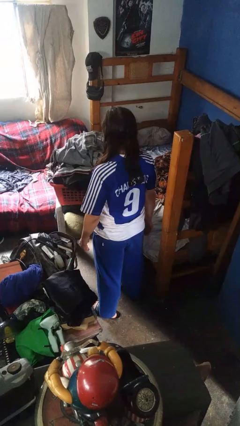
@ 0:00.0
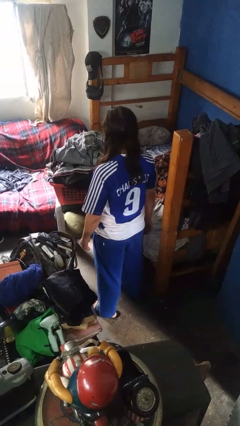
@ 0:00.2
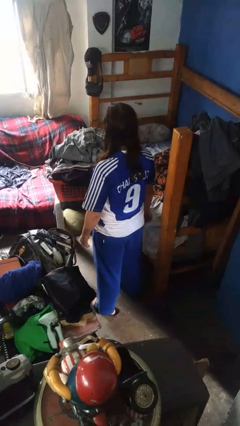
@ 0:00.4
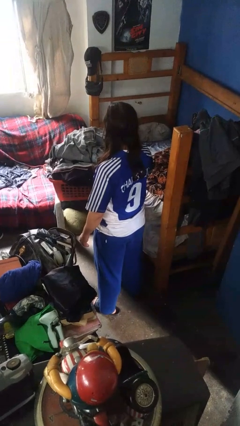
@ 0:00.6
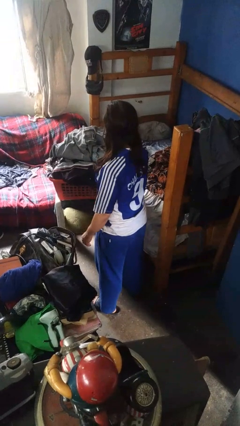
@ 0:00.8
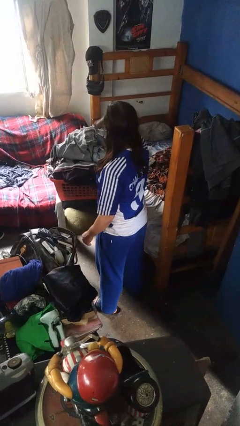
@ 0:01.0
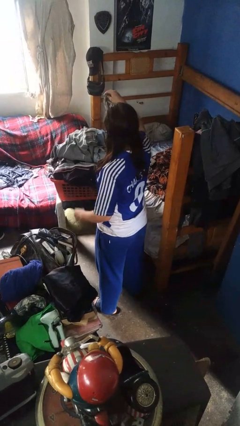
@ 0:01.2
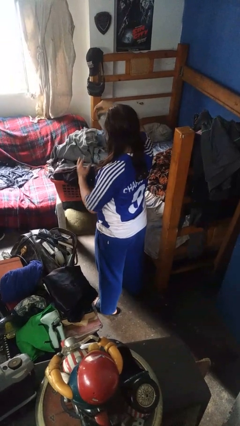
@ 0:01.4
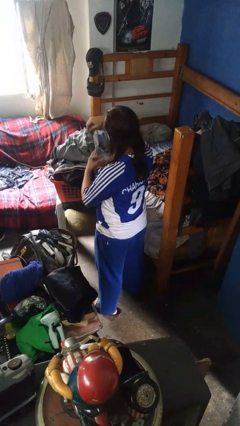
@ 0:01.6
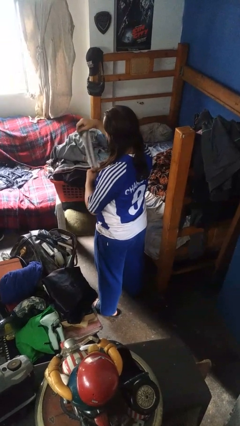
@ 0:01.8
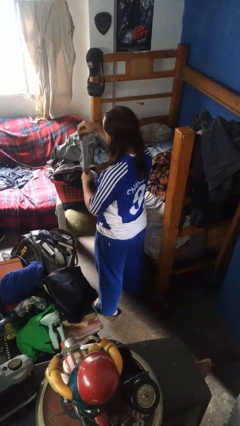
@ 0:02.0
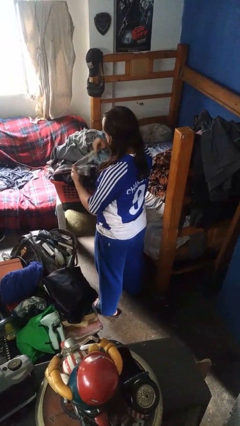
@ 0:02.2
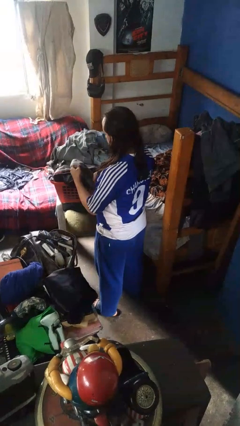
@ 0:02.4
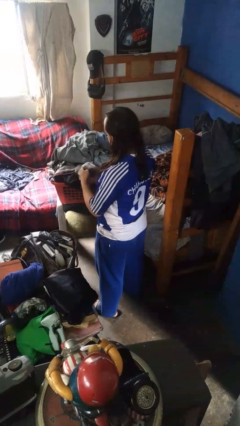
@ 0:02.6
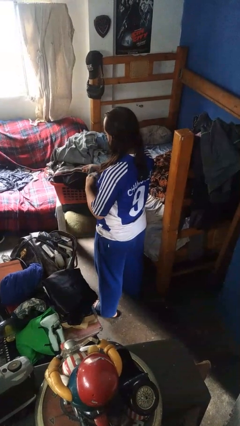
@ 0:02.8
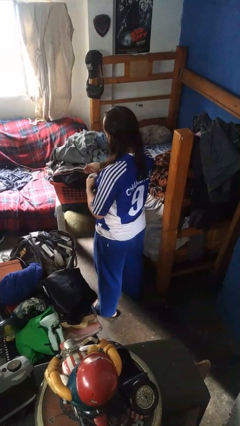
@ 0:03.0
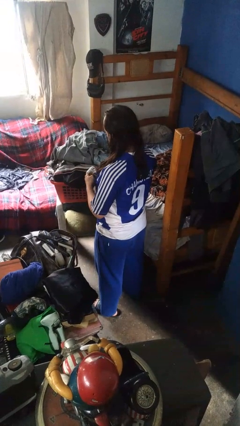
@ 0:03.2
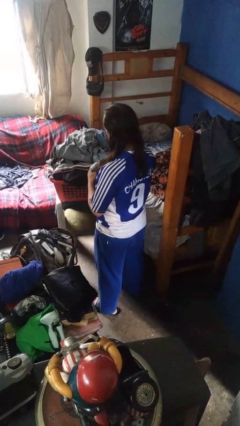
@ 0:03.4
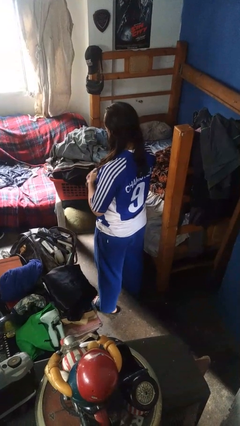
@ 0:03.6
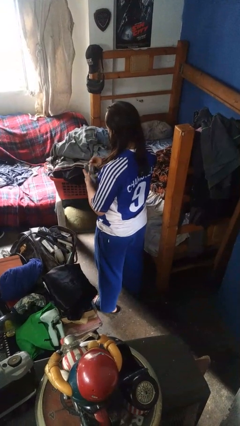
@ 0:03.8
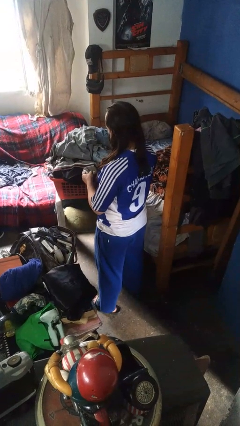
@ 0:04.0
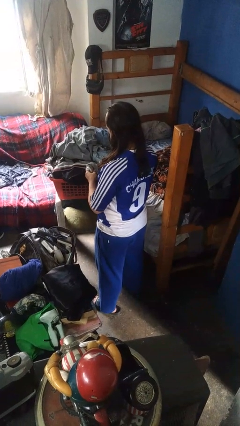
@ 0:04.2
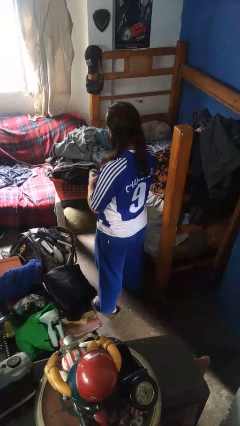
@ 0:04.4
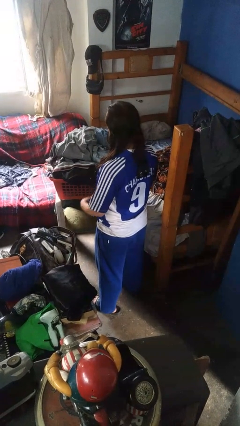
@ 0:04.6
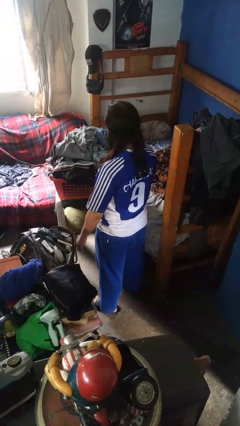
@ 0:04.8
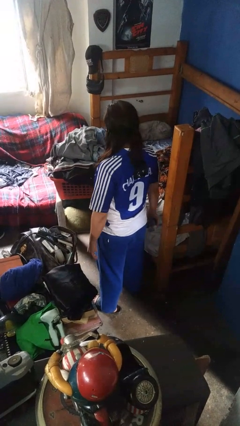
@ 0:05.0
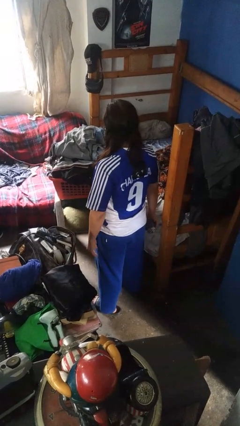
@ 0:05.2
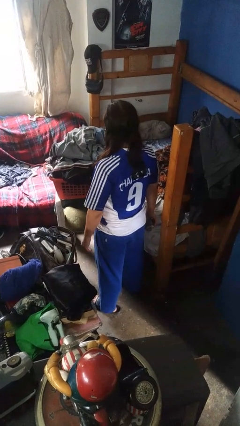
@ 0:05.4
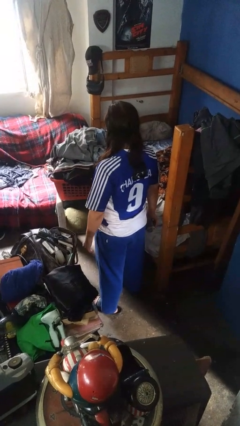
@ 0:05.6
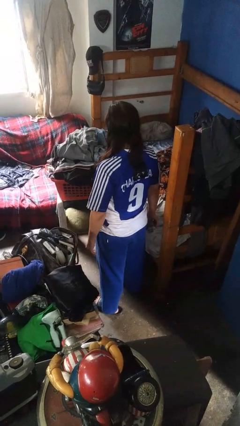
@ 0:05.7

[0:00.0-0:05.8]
person folds socks

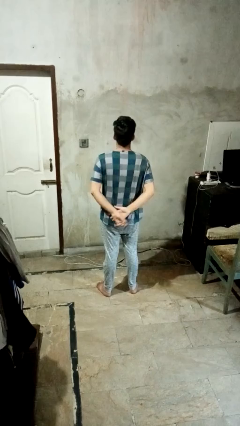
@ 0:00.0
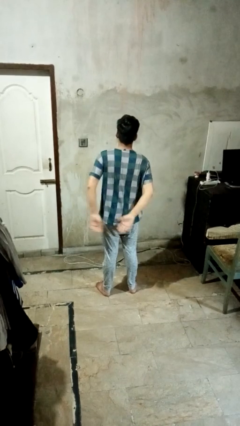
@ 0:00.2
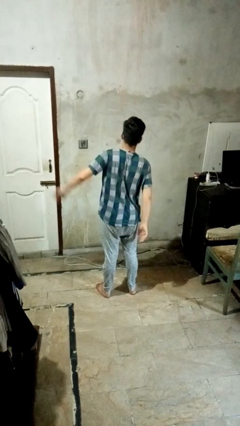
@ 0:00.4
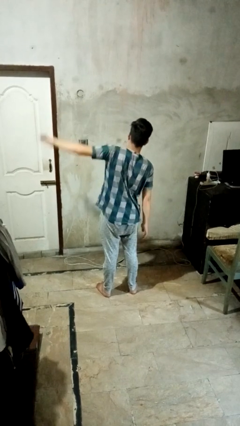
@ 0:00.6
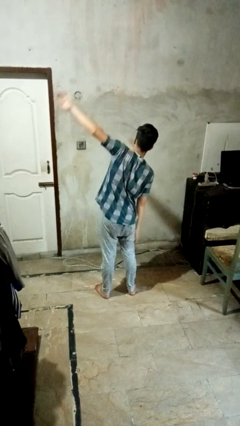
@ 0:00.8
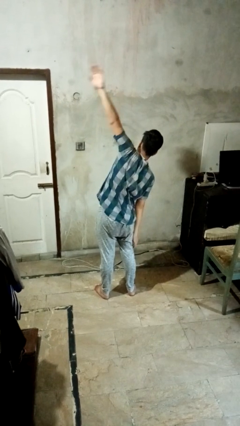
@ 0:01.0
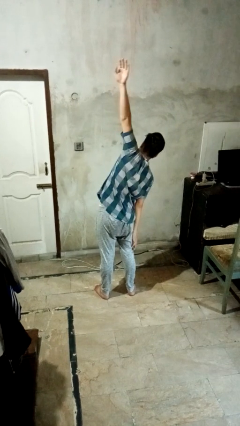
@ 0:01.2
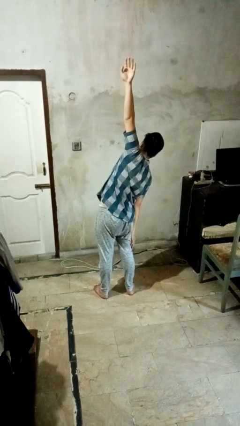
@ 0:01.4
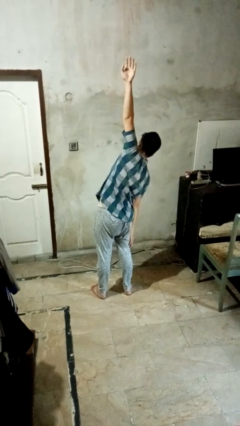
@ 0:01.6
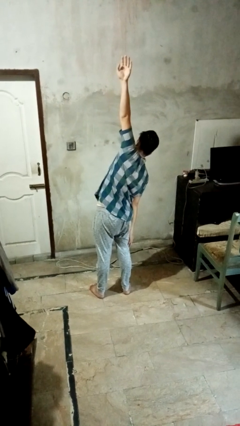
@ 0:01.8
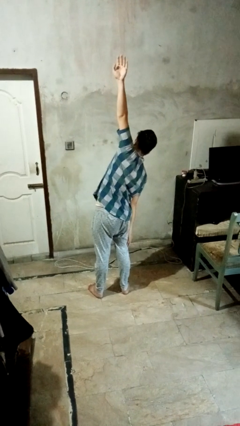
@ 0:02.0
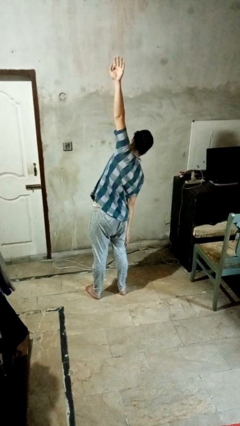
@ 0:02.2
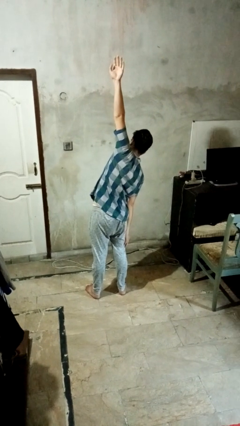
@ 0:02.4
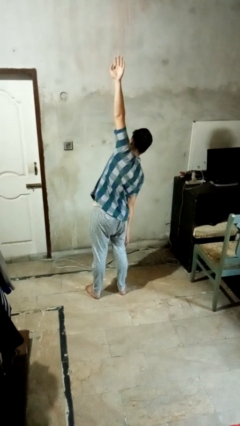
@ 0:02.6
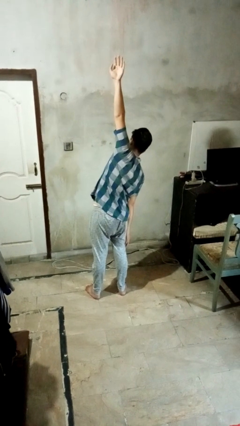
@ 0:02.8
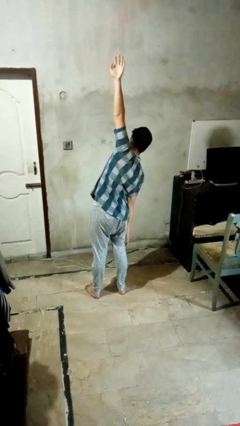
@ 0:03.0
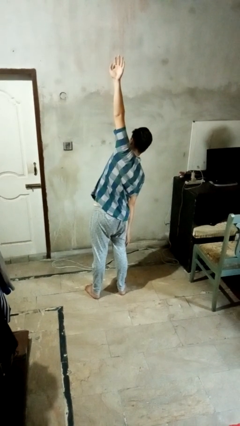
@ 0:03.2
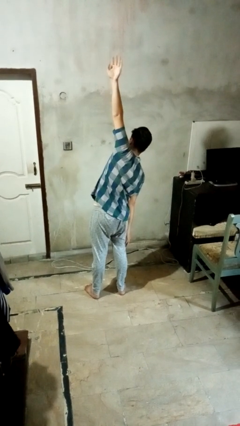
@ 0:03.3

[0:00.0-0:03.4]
person stretches arms to side

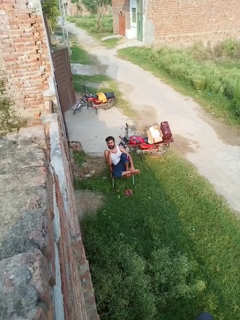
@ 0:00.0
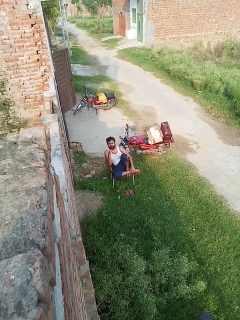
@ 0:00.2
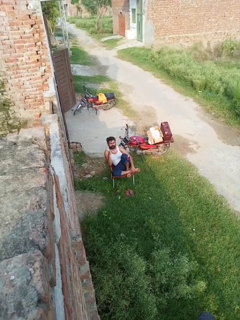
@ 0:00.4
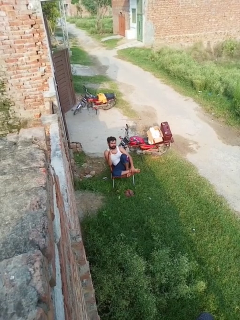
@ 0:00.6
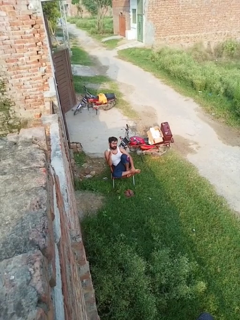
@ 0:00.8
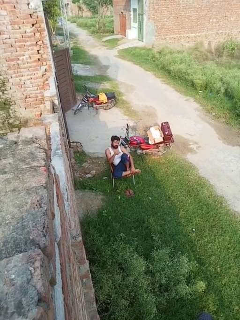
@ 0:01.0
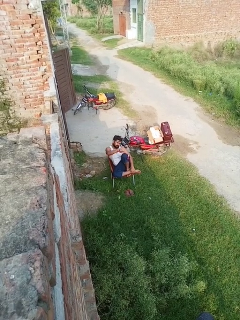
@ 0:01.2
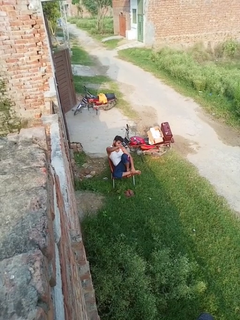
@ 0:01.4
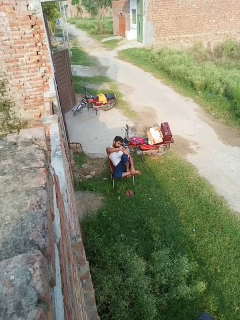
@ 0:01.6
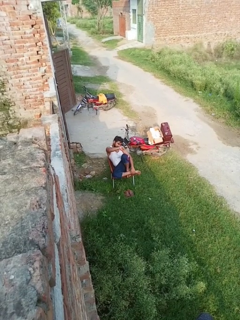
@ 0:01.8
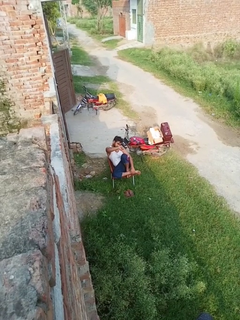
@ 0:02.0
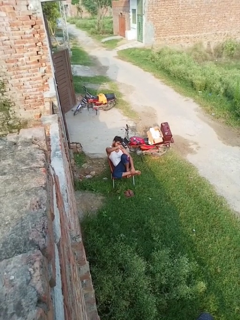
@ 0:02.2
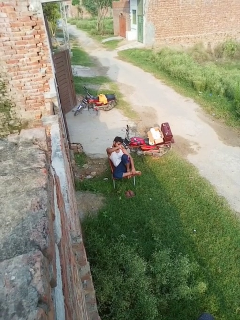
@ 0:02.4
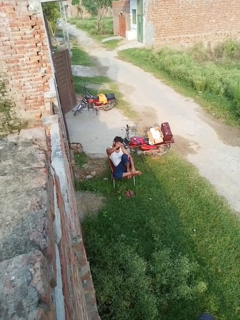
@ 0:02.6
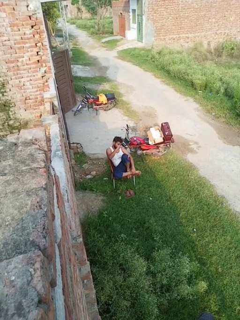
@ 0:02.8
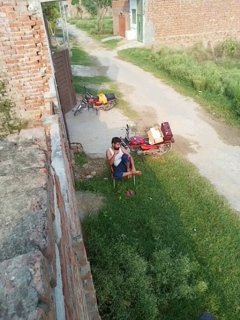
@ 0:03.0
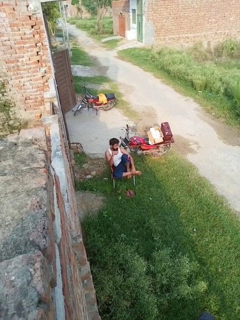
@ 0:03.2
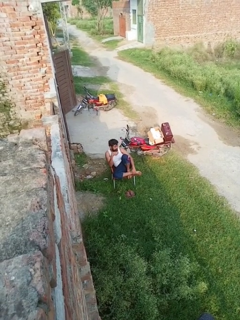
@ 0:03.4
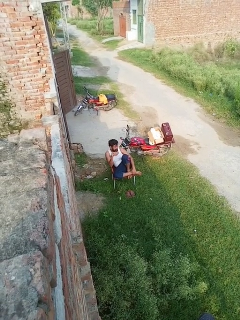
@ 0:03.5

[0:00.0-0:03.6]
person gestures thumbs down

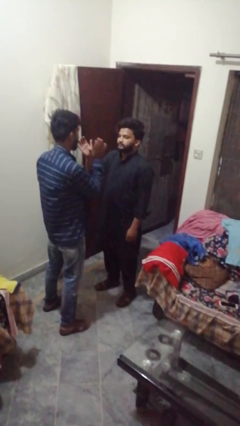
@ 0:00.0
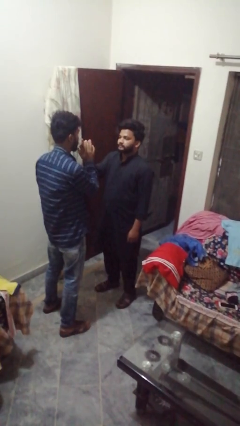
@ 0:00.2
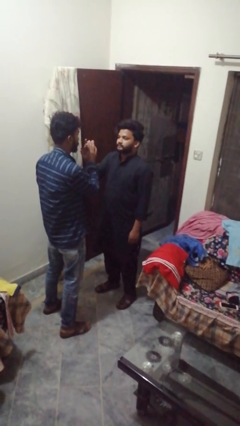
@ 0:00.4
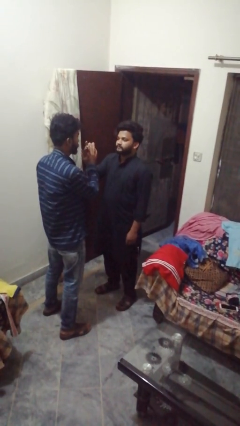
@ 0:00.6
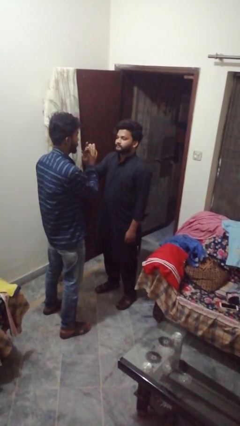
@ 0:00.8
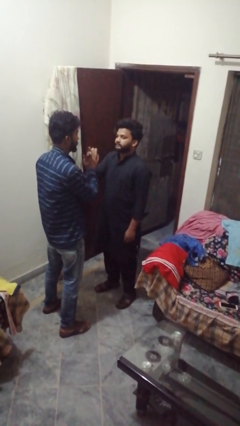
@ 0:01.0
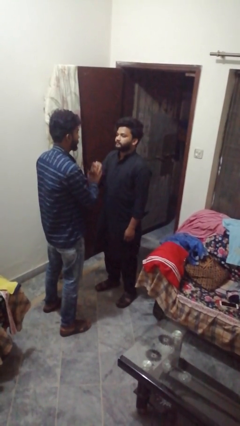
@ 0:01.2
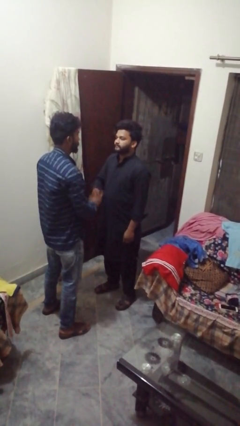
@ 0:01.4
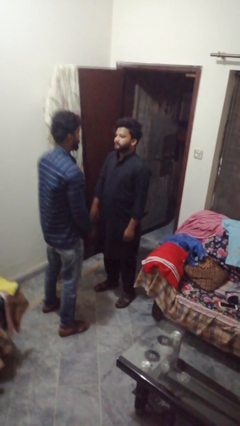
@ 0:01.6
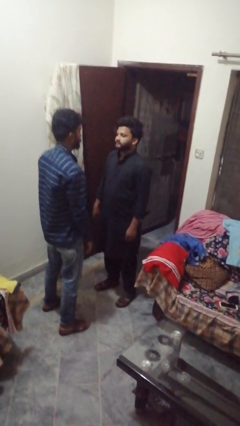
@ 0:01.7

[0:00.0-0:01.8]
person highfives hand

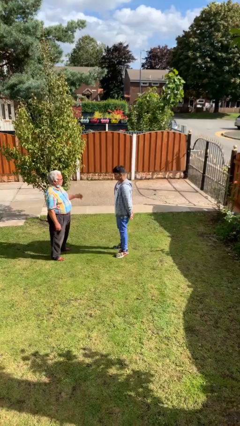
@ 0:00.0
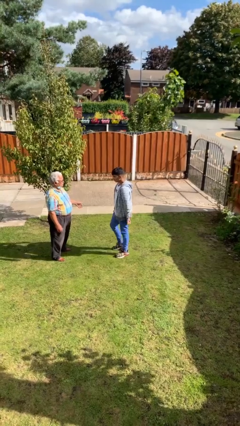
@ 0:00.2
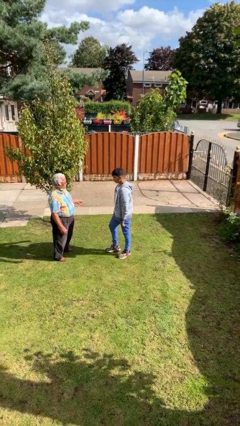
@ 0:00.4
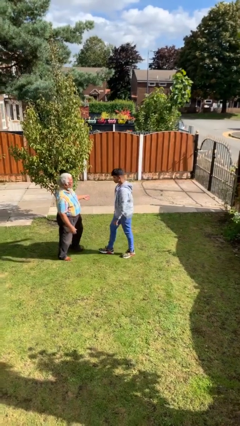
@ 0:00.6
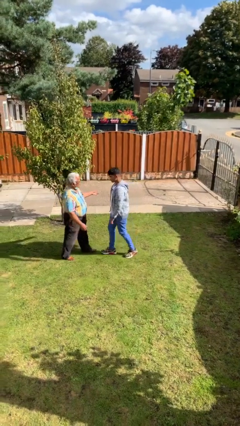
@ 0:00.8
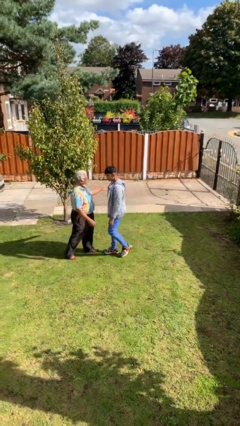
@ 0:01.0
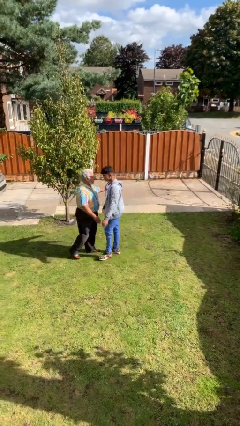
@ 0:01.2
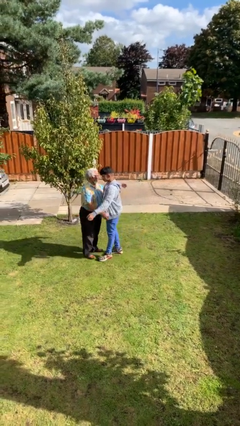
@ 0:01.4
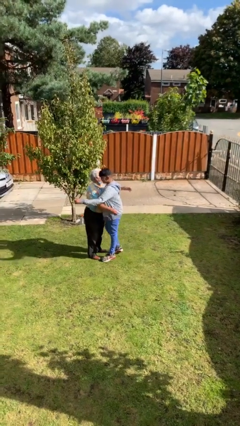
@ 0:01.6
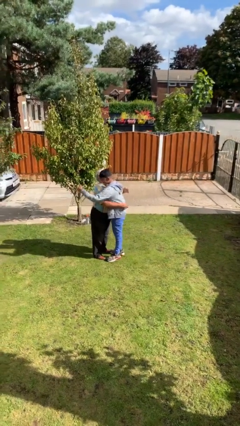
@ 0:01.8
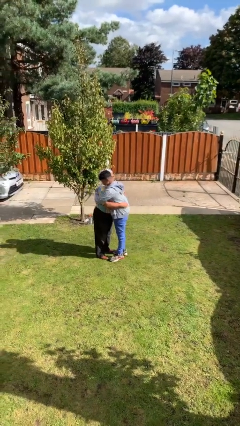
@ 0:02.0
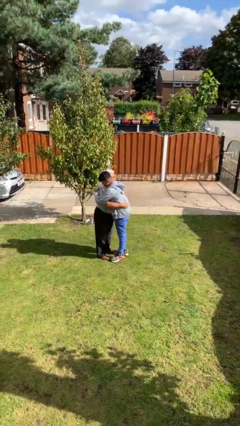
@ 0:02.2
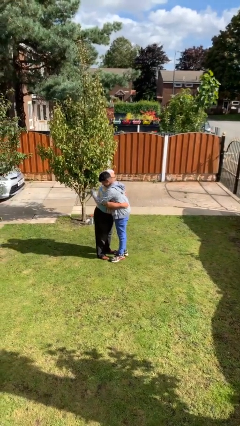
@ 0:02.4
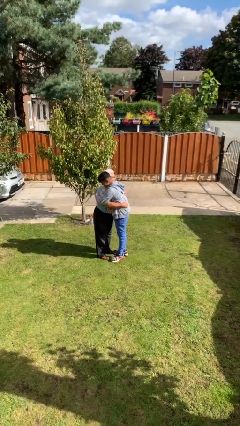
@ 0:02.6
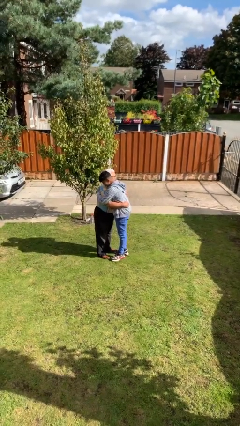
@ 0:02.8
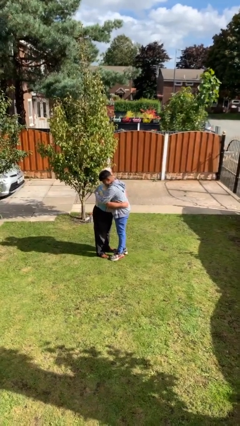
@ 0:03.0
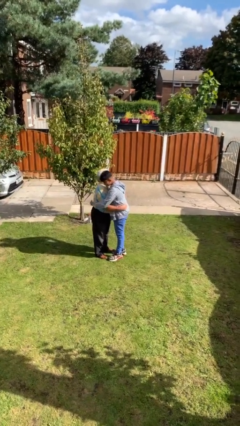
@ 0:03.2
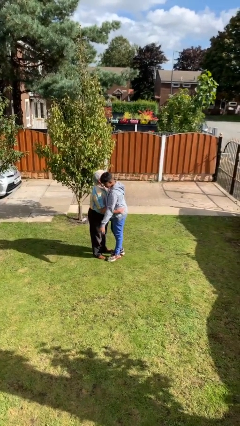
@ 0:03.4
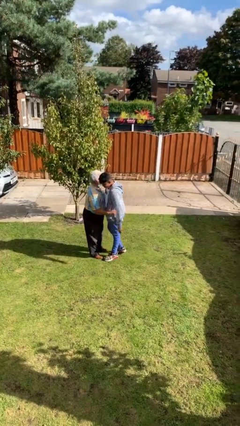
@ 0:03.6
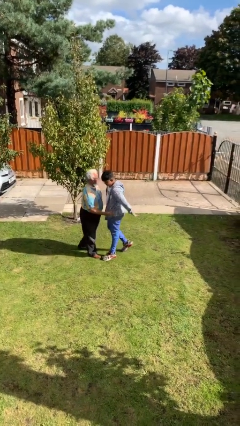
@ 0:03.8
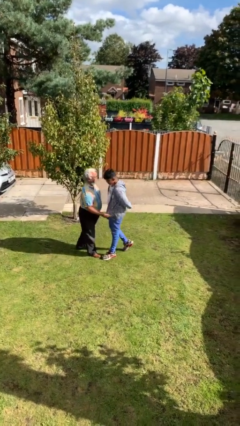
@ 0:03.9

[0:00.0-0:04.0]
person embraces person
